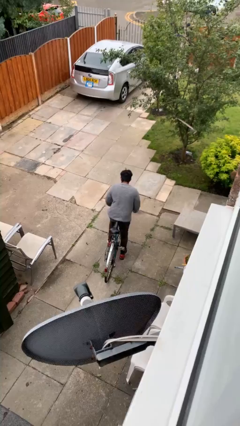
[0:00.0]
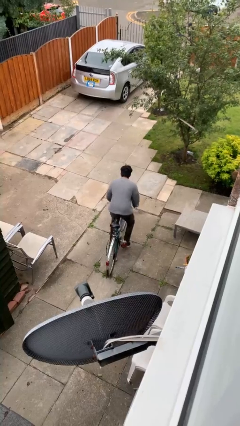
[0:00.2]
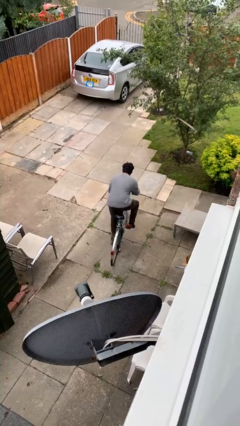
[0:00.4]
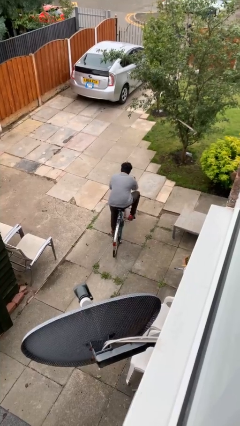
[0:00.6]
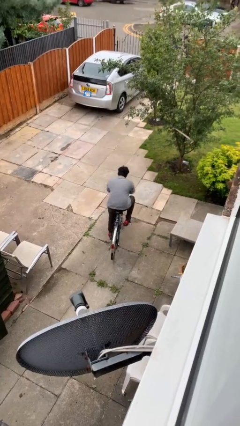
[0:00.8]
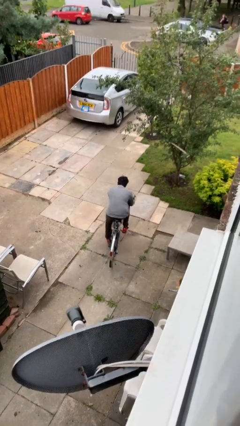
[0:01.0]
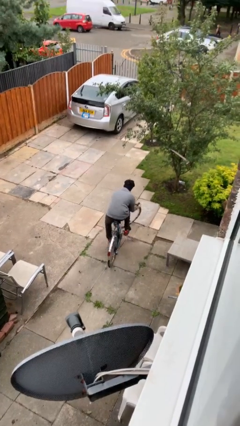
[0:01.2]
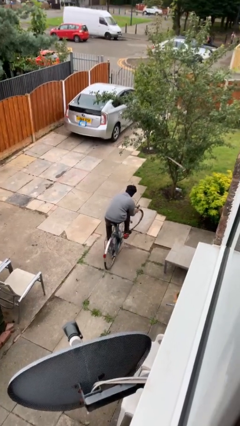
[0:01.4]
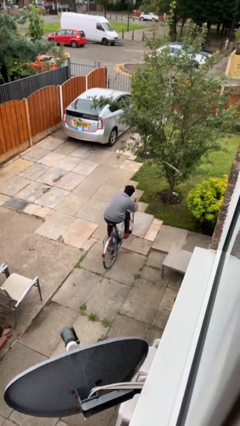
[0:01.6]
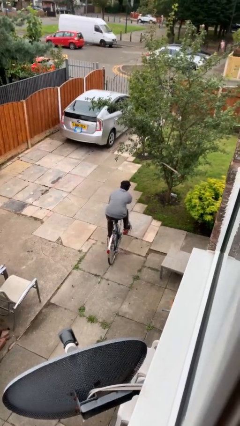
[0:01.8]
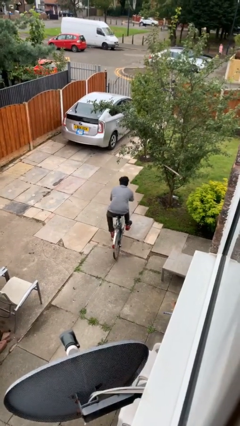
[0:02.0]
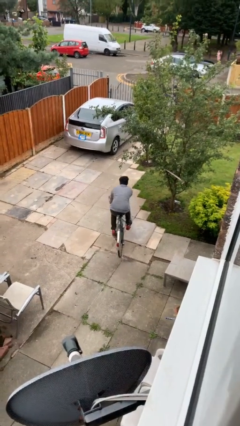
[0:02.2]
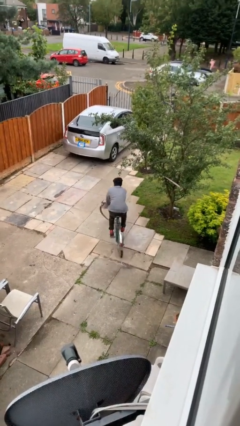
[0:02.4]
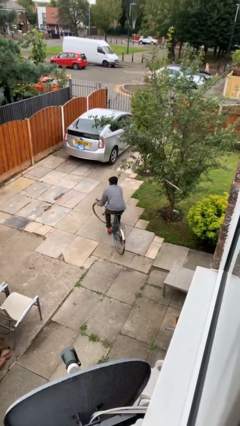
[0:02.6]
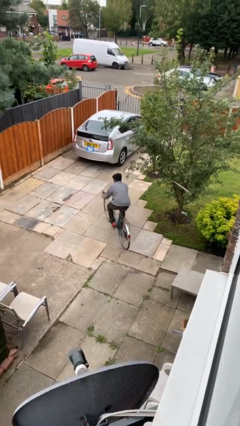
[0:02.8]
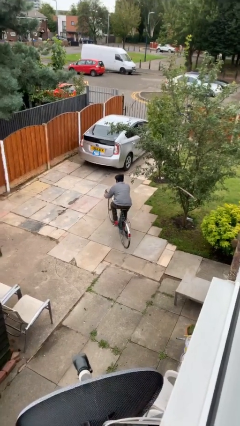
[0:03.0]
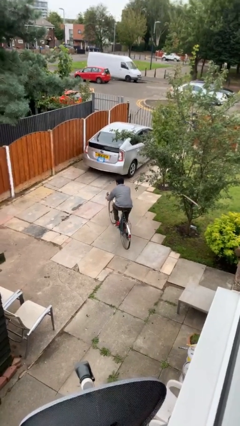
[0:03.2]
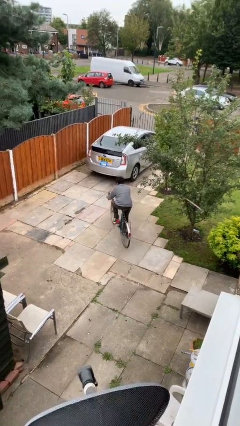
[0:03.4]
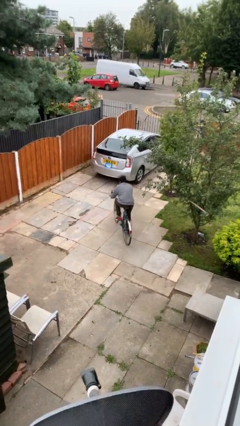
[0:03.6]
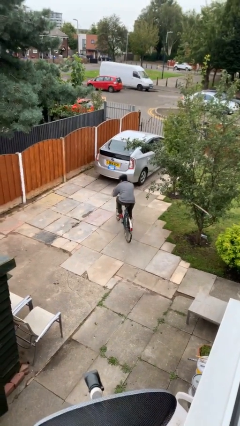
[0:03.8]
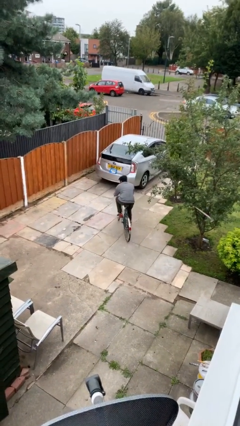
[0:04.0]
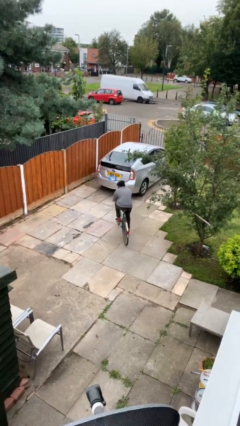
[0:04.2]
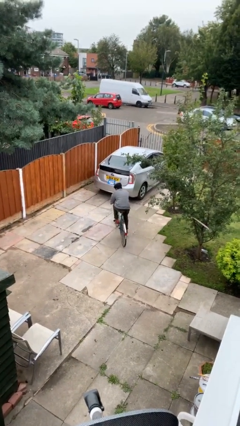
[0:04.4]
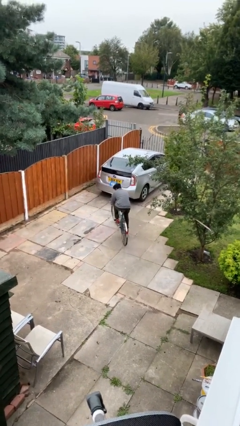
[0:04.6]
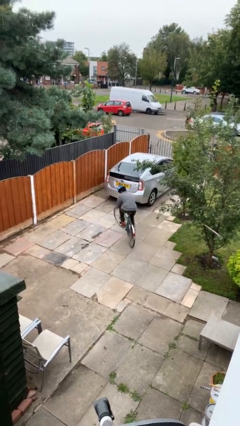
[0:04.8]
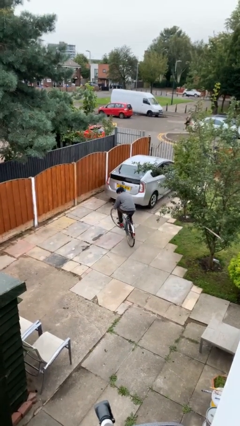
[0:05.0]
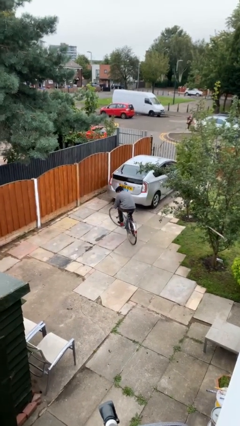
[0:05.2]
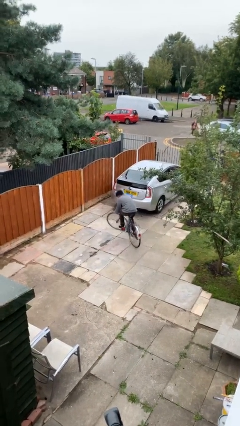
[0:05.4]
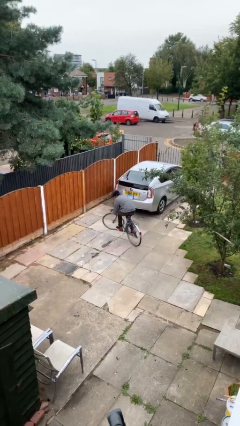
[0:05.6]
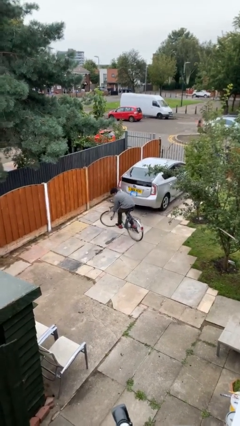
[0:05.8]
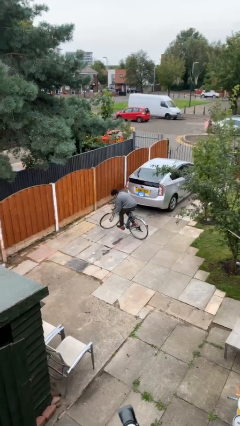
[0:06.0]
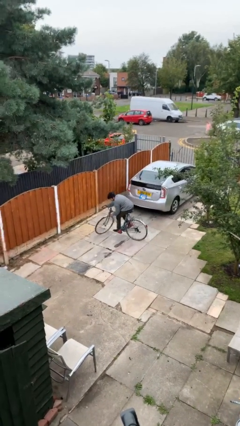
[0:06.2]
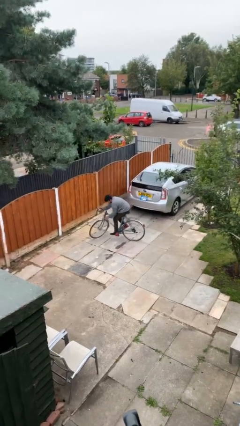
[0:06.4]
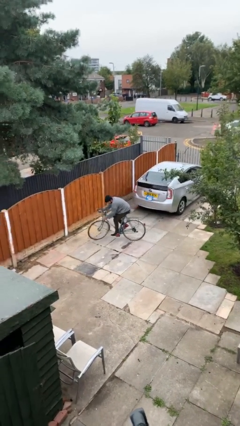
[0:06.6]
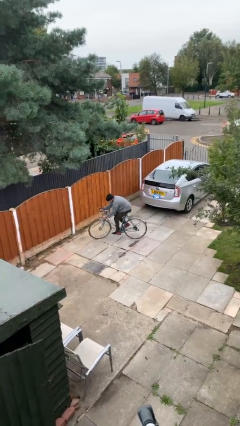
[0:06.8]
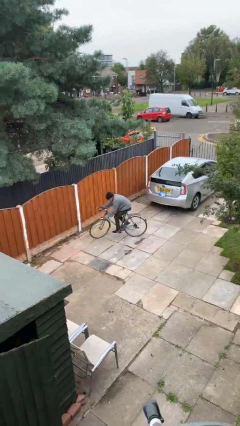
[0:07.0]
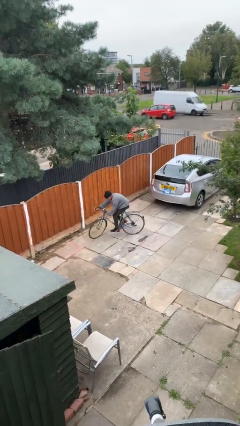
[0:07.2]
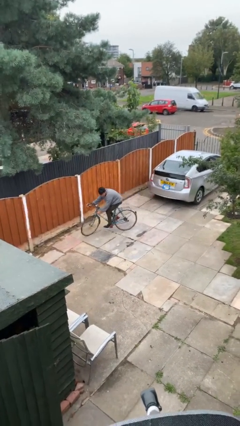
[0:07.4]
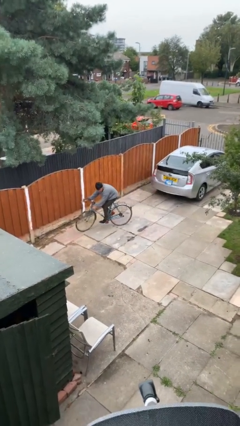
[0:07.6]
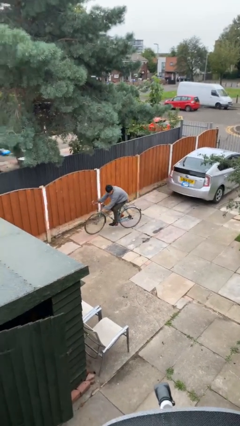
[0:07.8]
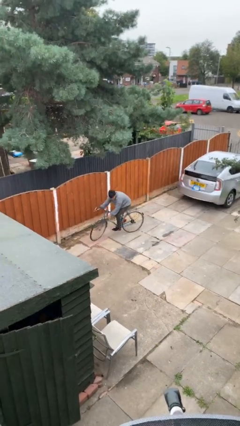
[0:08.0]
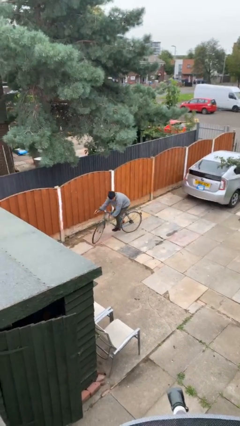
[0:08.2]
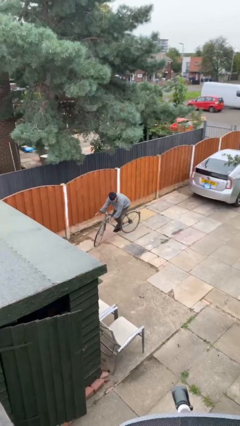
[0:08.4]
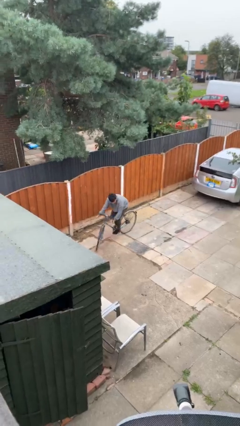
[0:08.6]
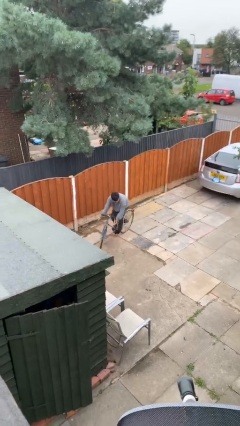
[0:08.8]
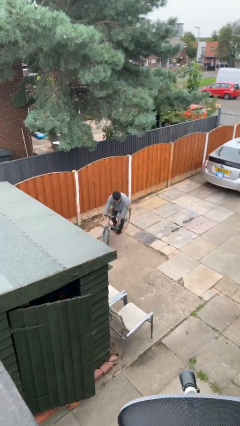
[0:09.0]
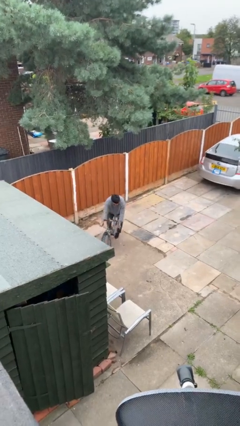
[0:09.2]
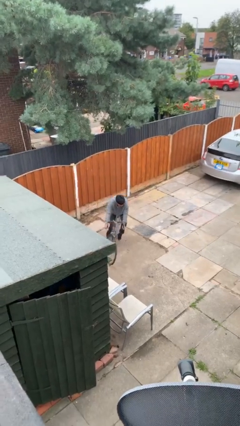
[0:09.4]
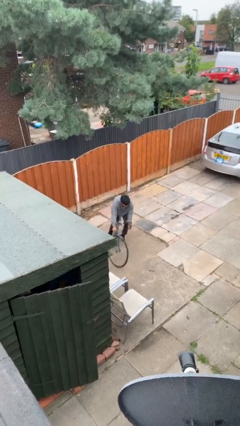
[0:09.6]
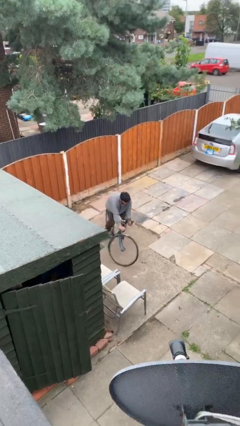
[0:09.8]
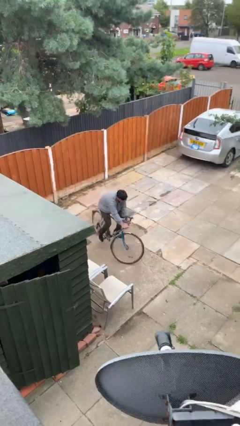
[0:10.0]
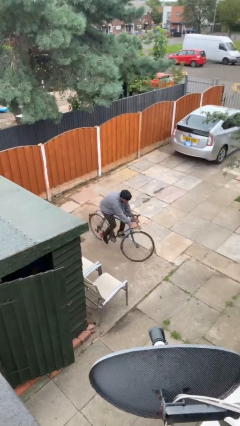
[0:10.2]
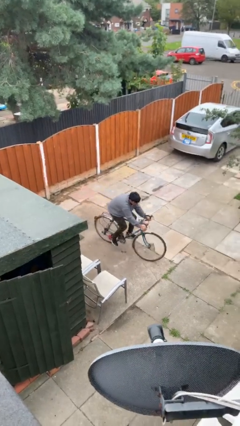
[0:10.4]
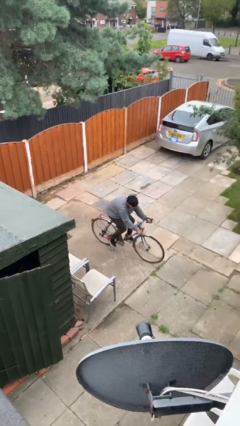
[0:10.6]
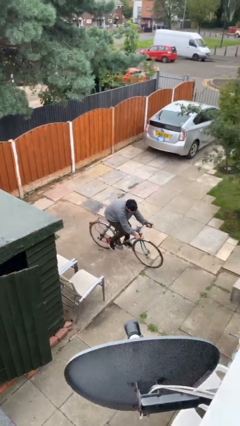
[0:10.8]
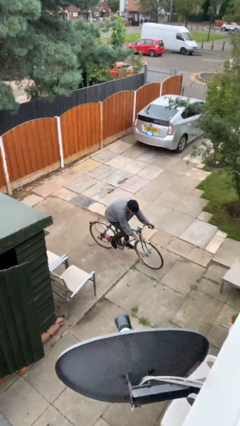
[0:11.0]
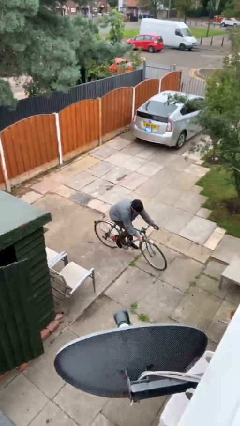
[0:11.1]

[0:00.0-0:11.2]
person rides bicycle

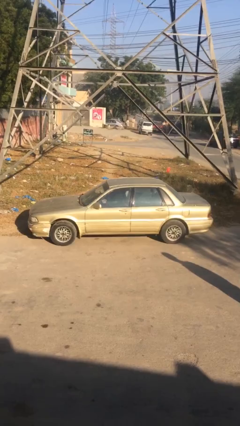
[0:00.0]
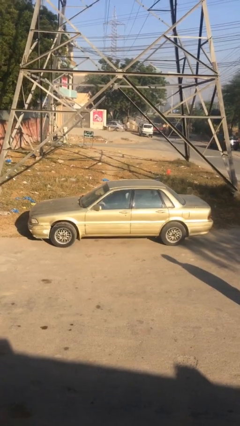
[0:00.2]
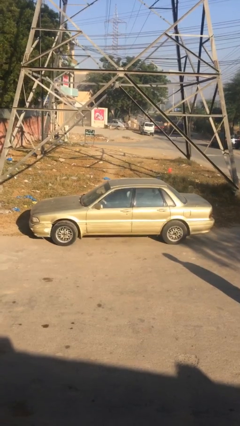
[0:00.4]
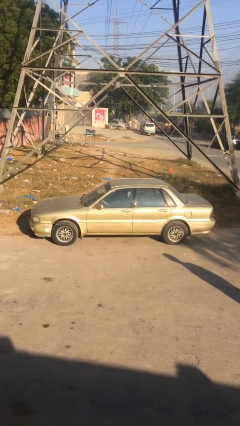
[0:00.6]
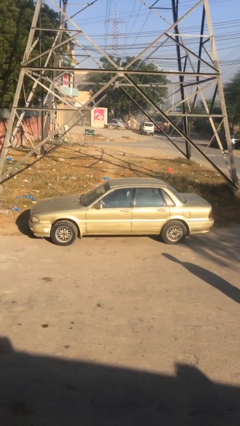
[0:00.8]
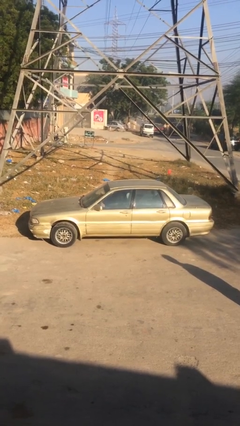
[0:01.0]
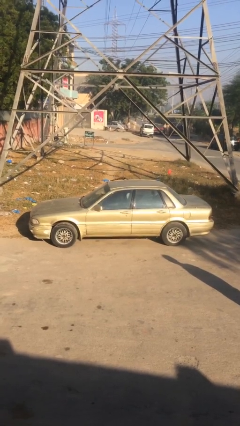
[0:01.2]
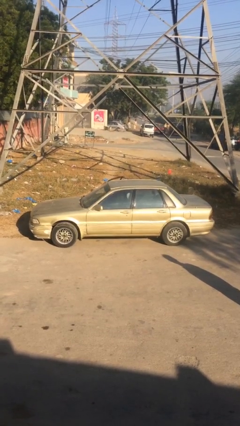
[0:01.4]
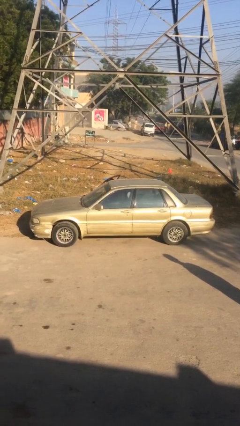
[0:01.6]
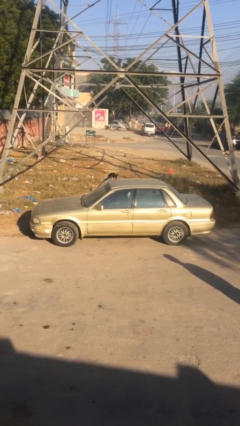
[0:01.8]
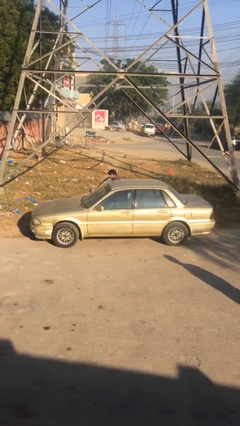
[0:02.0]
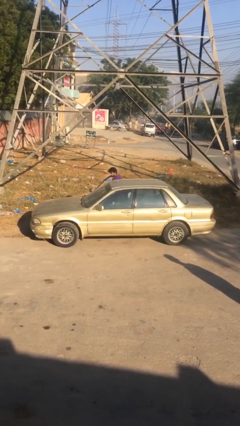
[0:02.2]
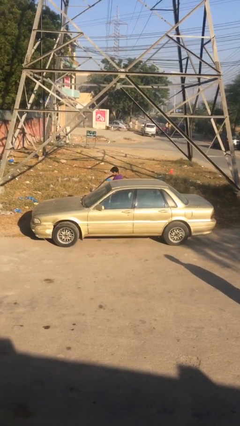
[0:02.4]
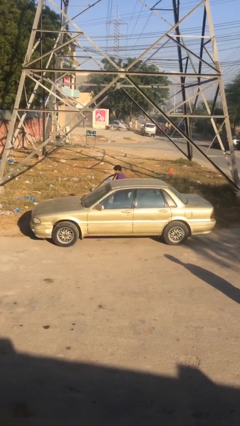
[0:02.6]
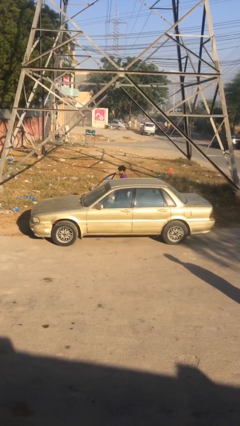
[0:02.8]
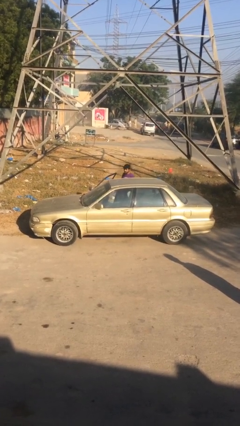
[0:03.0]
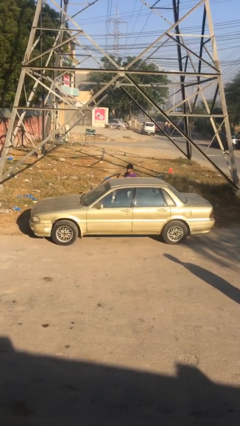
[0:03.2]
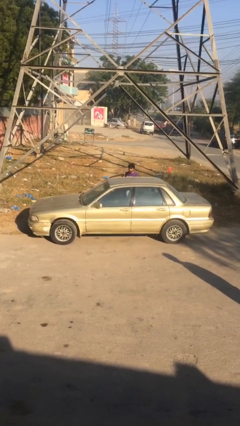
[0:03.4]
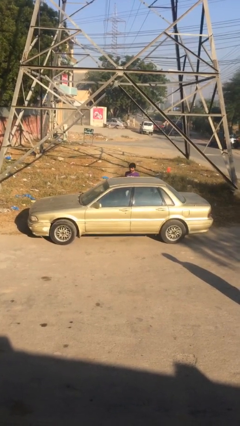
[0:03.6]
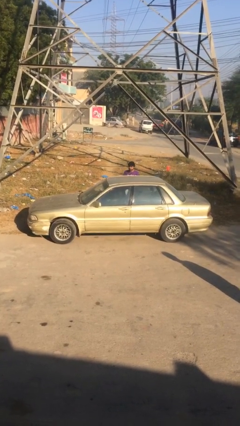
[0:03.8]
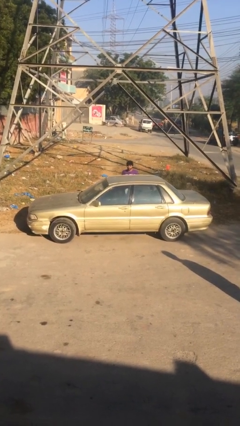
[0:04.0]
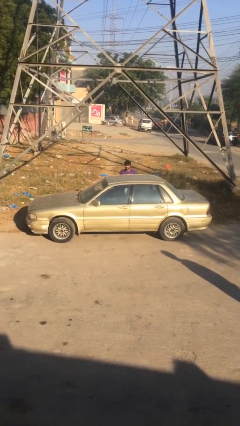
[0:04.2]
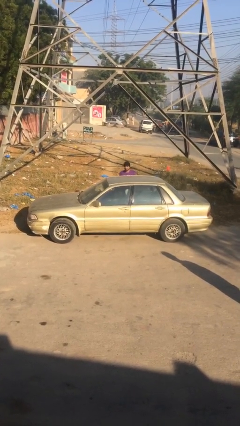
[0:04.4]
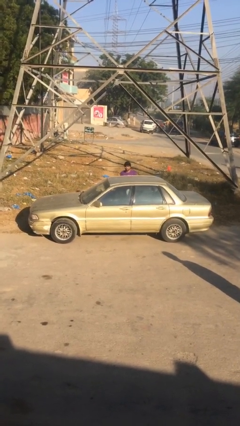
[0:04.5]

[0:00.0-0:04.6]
car drops off person

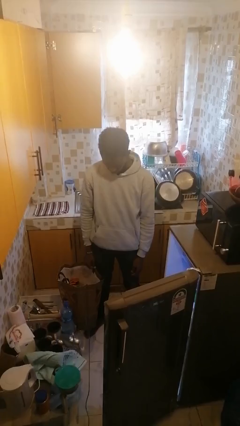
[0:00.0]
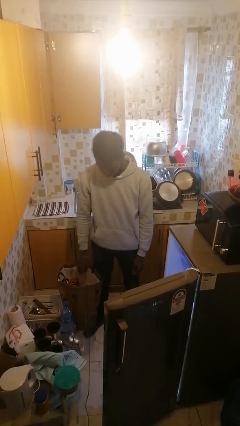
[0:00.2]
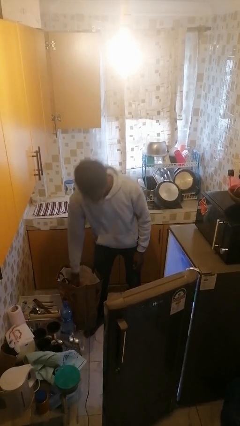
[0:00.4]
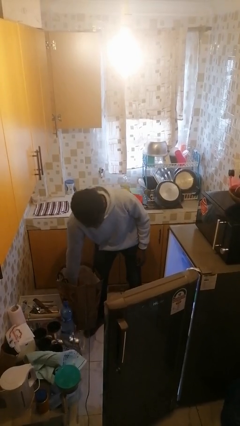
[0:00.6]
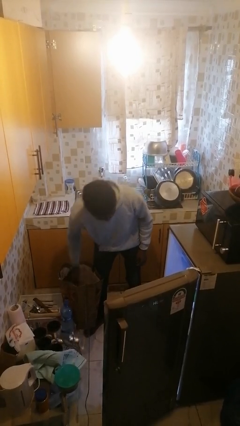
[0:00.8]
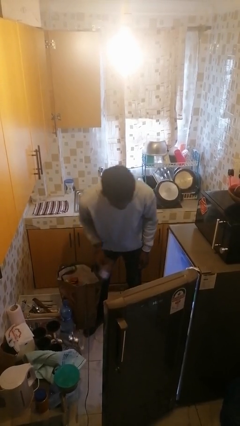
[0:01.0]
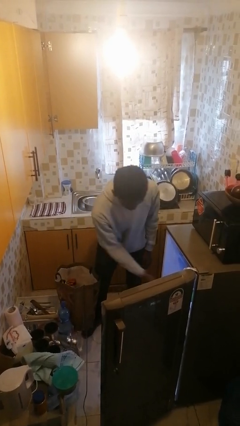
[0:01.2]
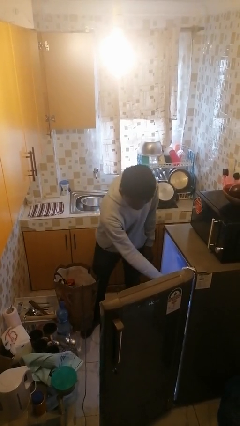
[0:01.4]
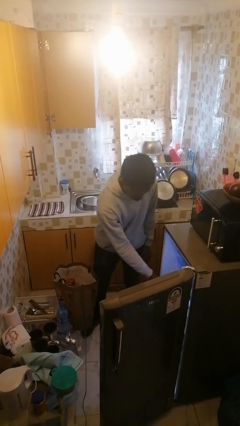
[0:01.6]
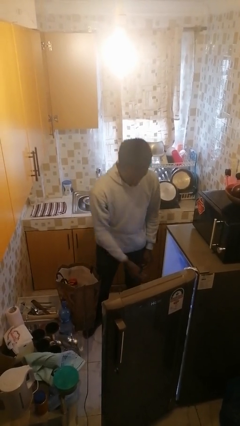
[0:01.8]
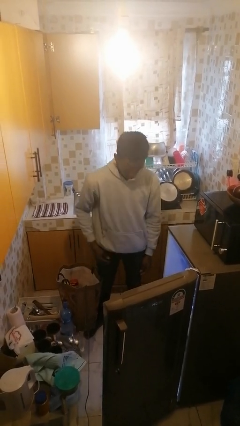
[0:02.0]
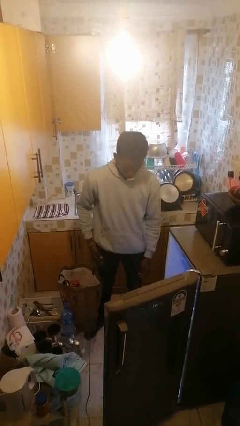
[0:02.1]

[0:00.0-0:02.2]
person loads groceries into refrigerator
